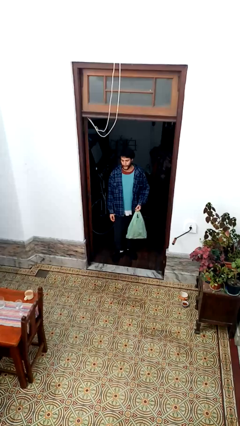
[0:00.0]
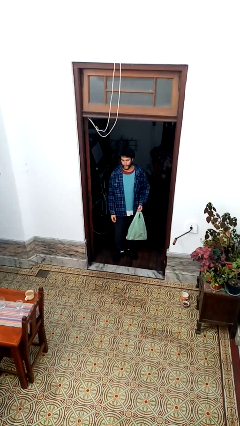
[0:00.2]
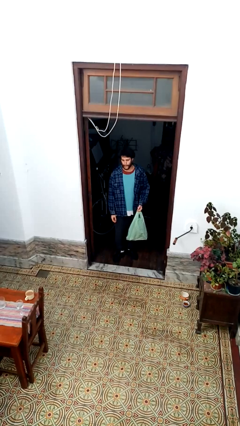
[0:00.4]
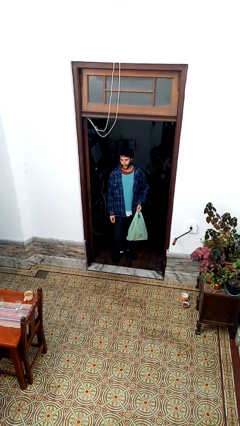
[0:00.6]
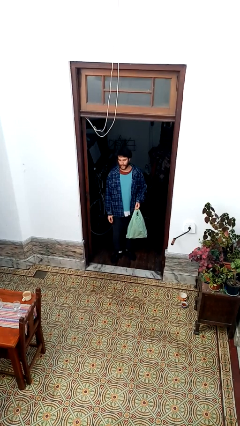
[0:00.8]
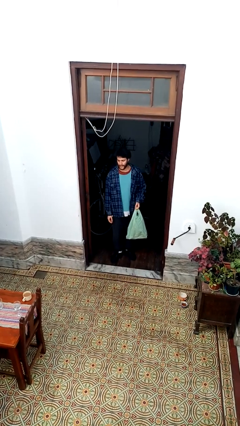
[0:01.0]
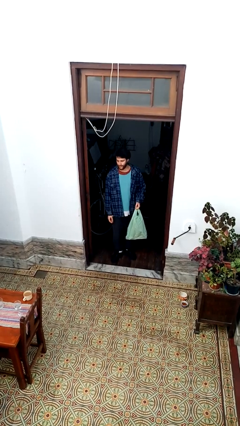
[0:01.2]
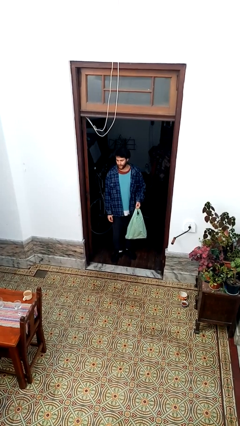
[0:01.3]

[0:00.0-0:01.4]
person carries groceries

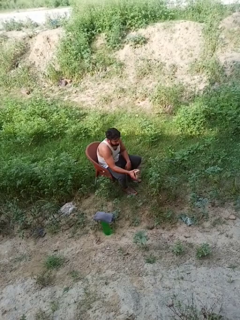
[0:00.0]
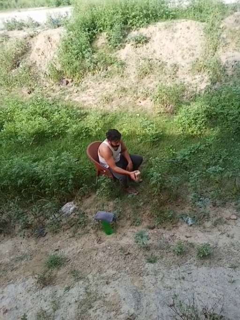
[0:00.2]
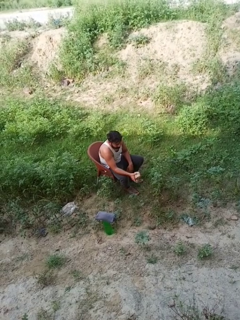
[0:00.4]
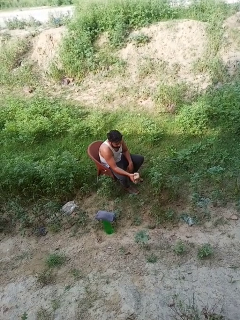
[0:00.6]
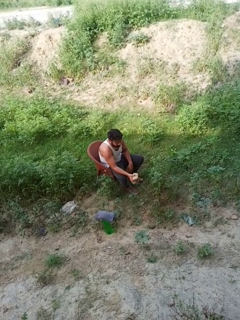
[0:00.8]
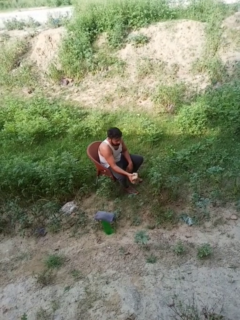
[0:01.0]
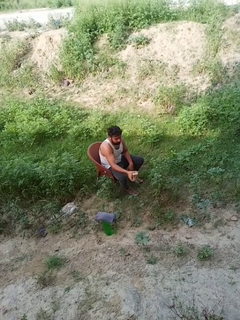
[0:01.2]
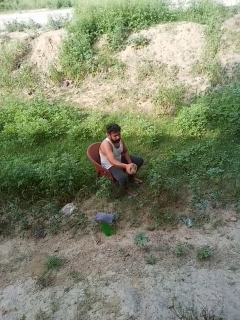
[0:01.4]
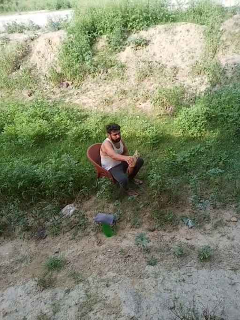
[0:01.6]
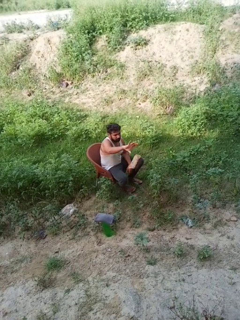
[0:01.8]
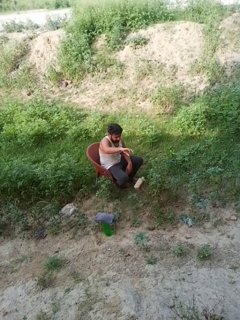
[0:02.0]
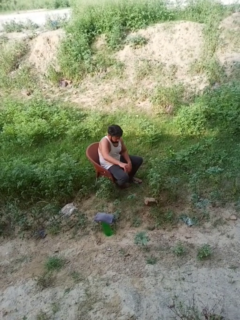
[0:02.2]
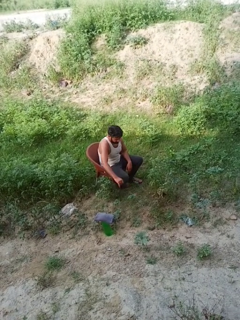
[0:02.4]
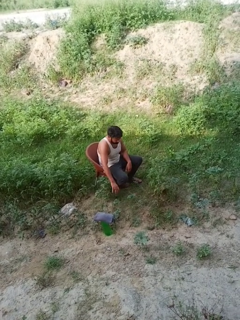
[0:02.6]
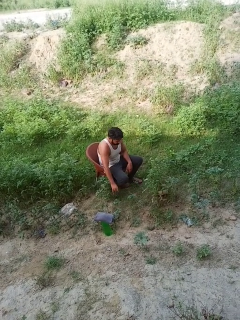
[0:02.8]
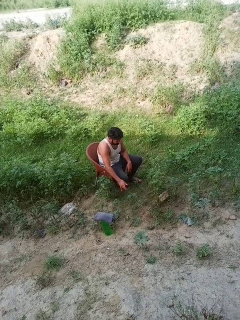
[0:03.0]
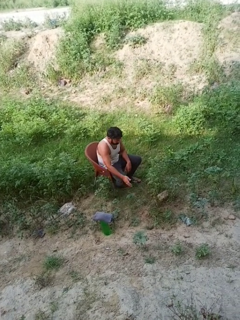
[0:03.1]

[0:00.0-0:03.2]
person throws object to ground

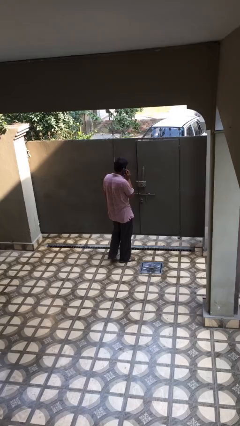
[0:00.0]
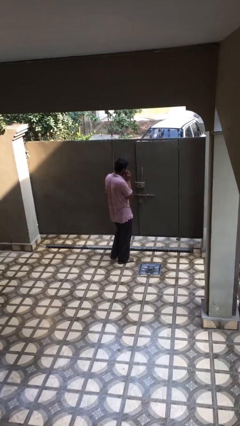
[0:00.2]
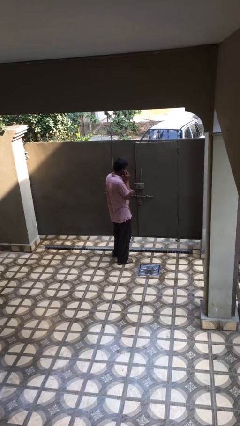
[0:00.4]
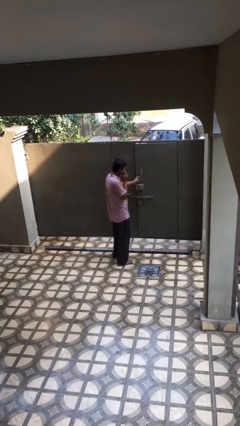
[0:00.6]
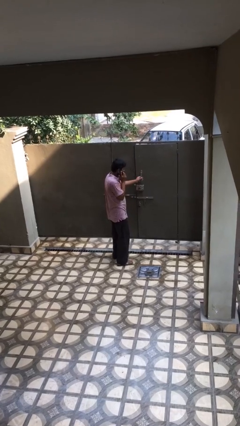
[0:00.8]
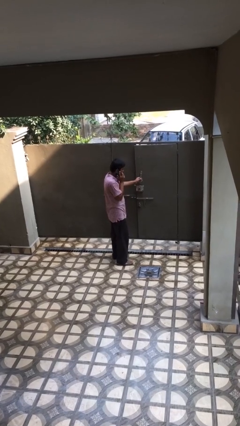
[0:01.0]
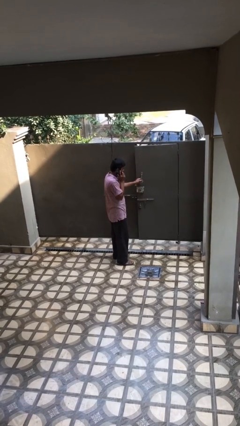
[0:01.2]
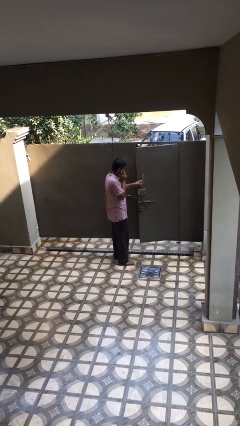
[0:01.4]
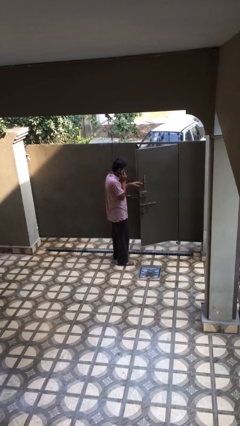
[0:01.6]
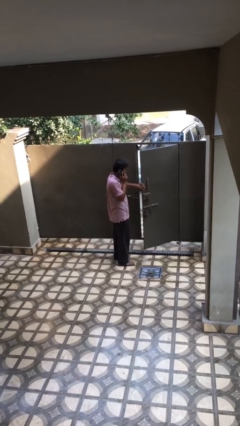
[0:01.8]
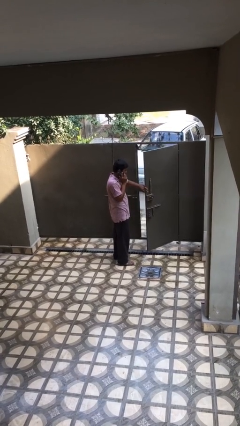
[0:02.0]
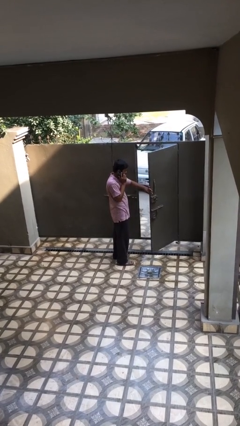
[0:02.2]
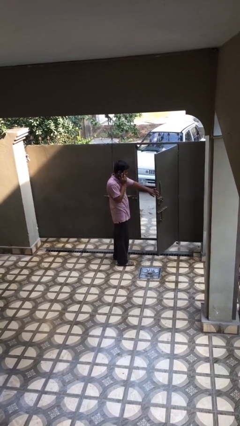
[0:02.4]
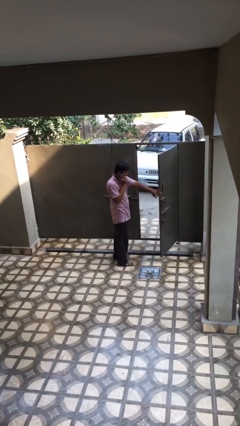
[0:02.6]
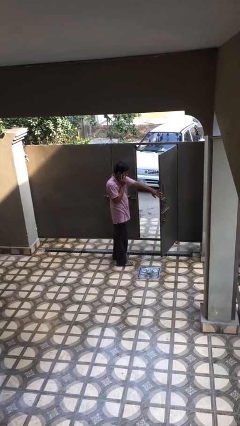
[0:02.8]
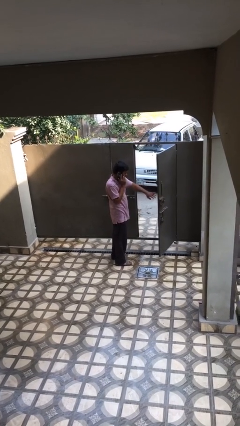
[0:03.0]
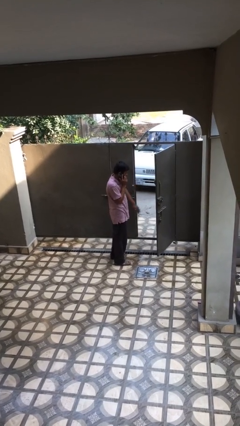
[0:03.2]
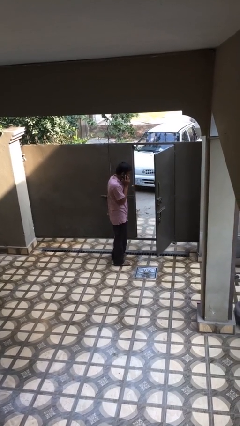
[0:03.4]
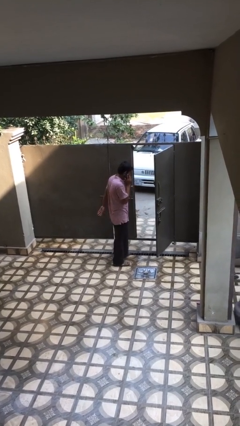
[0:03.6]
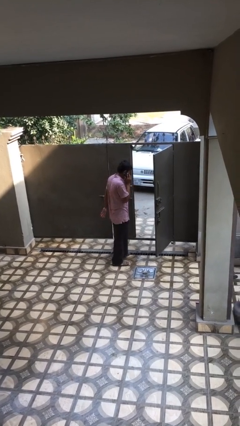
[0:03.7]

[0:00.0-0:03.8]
person opens facility door

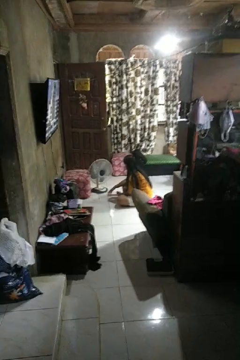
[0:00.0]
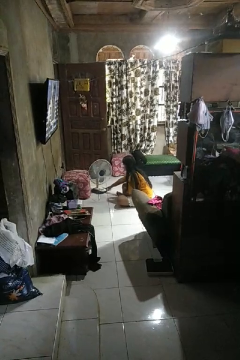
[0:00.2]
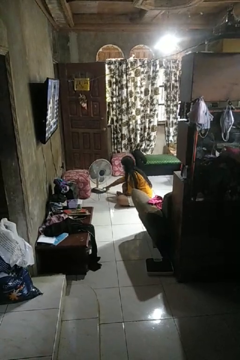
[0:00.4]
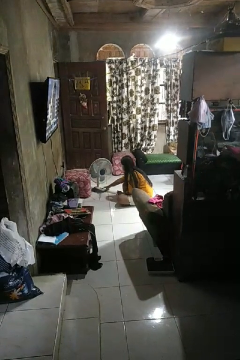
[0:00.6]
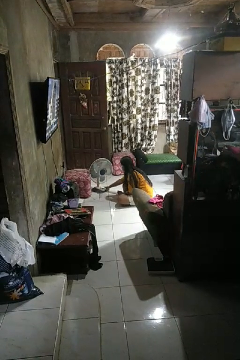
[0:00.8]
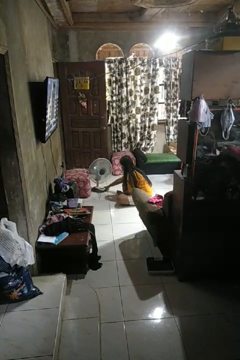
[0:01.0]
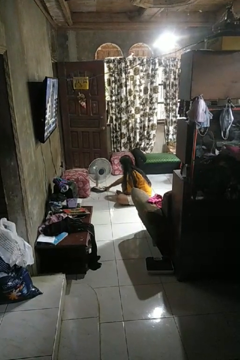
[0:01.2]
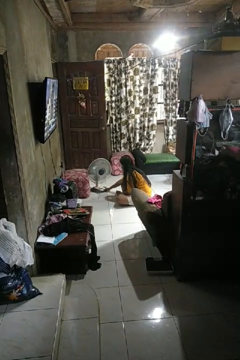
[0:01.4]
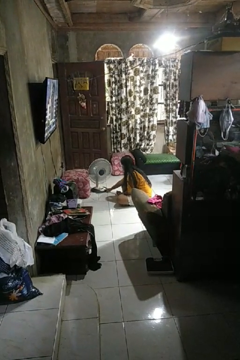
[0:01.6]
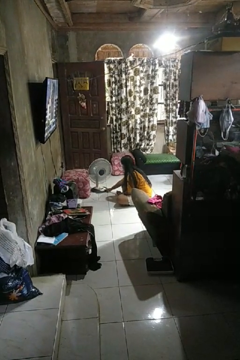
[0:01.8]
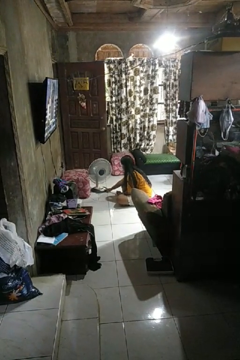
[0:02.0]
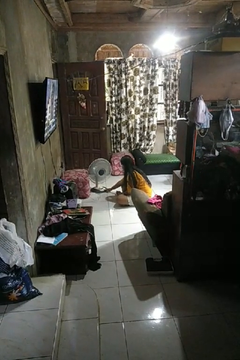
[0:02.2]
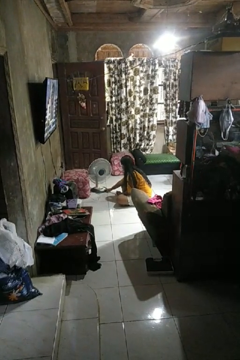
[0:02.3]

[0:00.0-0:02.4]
person turns on fan

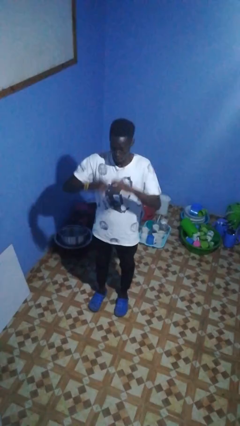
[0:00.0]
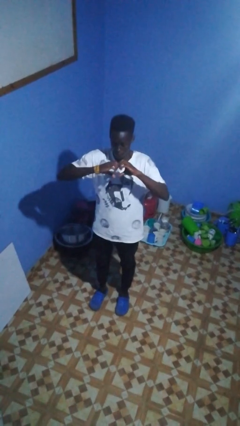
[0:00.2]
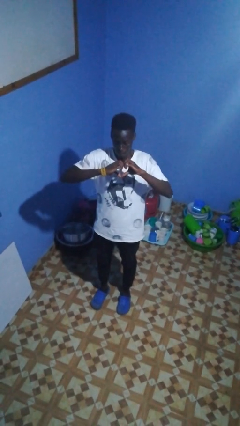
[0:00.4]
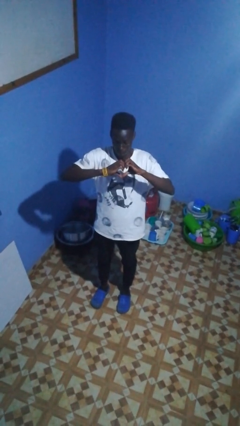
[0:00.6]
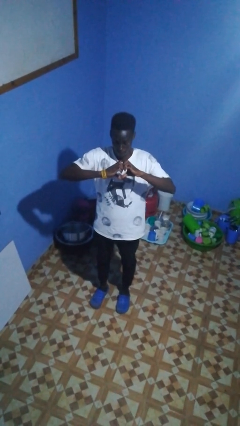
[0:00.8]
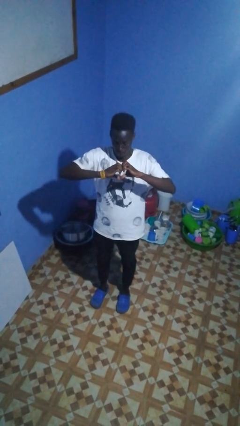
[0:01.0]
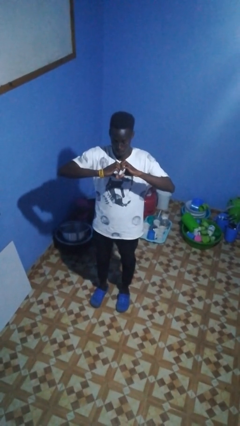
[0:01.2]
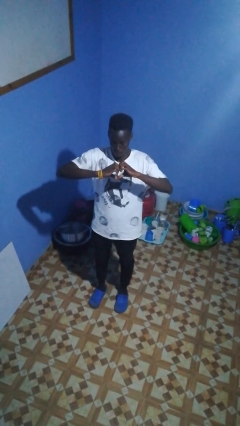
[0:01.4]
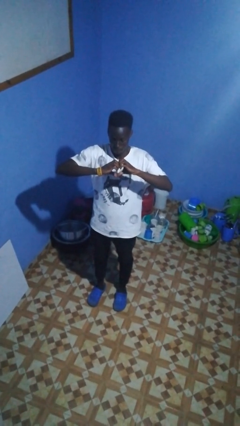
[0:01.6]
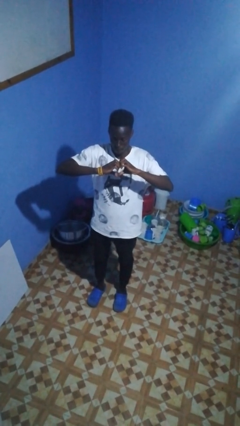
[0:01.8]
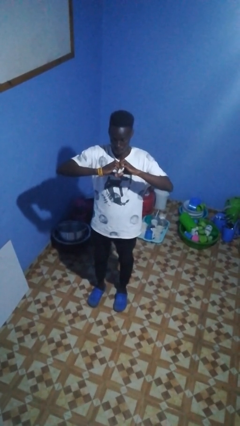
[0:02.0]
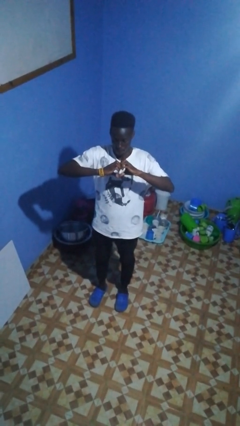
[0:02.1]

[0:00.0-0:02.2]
person gestures heart

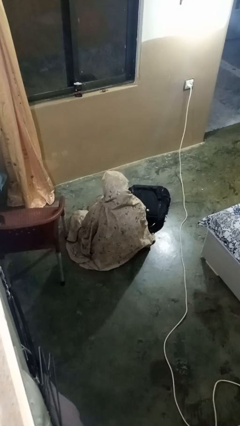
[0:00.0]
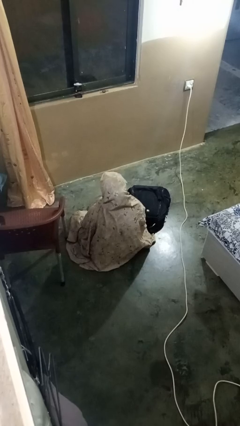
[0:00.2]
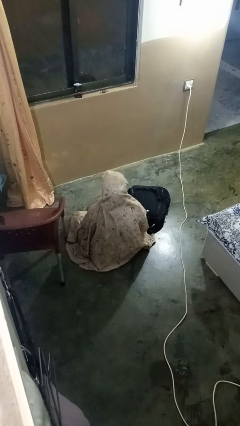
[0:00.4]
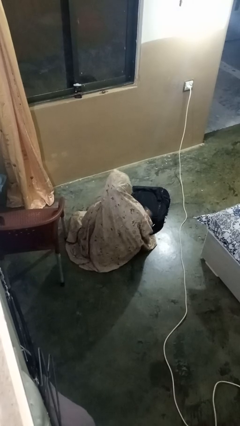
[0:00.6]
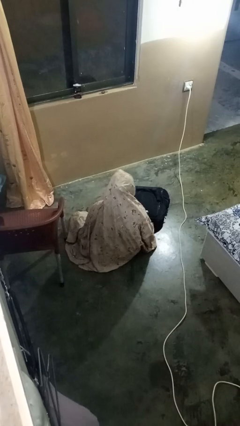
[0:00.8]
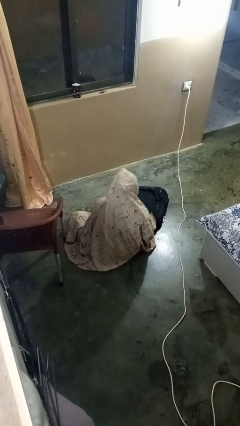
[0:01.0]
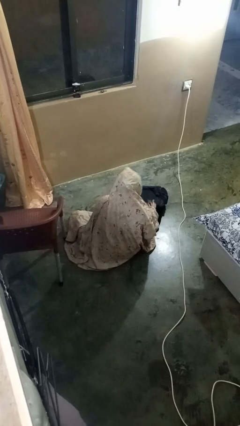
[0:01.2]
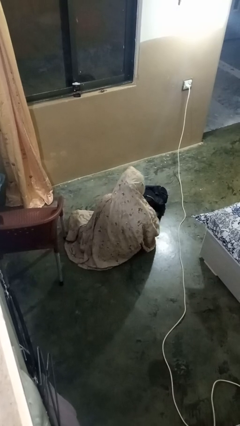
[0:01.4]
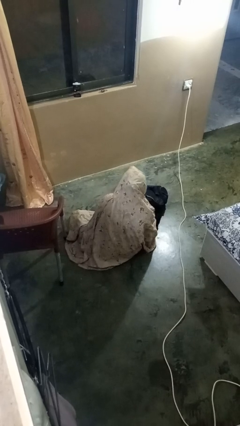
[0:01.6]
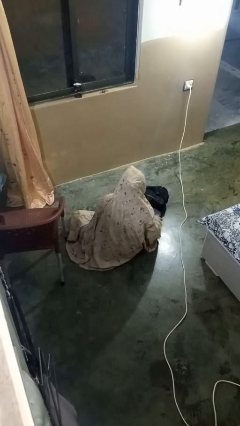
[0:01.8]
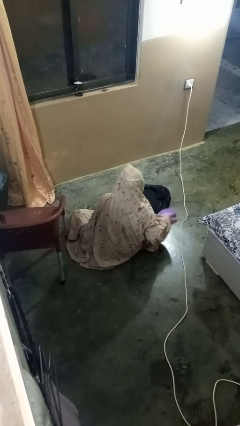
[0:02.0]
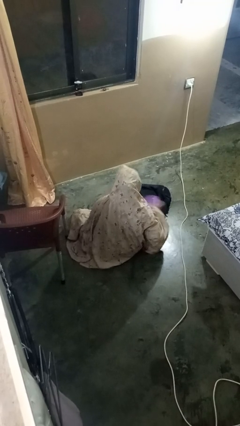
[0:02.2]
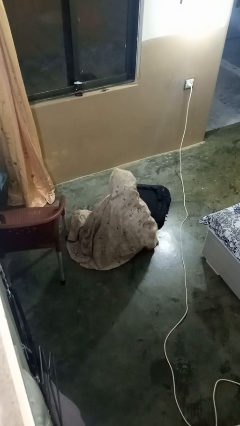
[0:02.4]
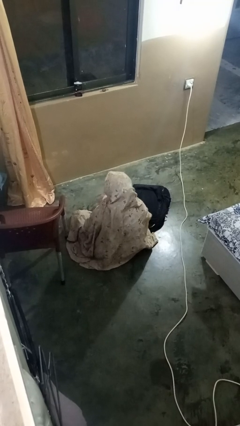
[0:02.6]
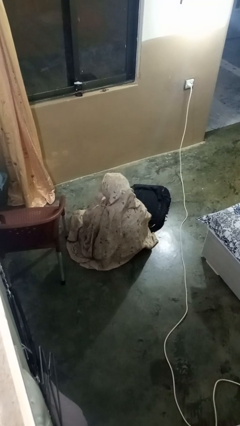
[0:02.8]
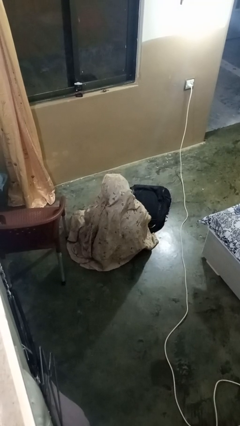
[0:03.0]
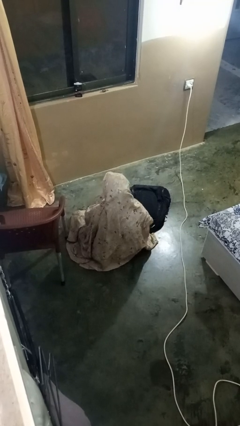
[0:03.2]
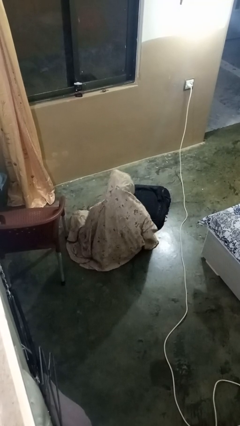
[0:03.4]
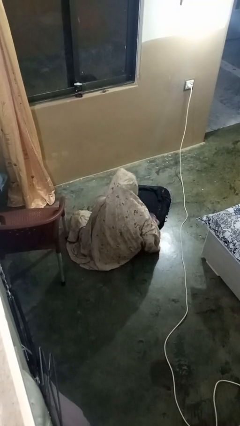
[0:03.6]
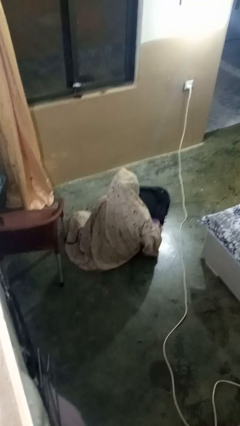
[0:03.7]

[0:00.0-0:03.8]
person eats snack from bag

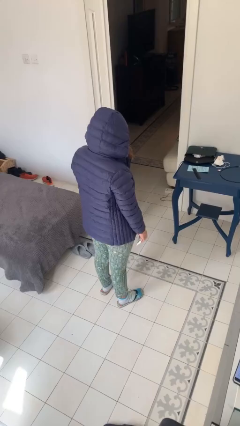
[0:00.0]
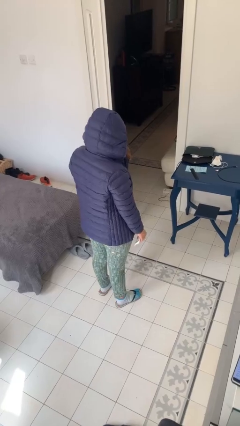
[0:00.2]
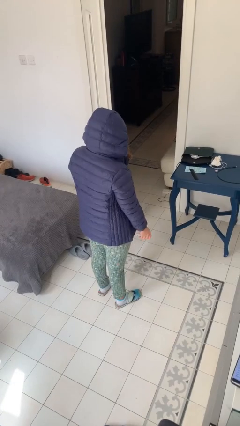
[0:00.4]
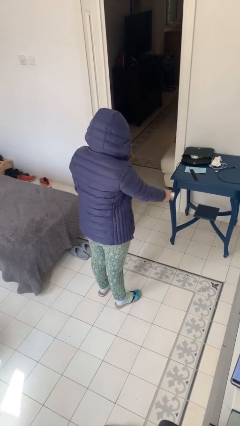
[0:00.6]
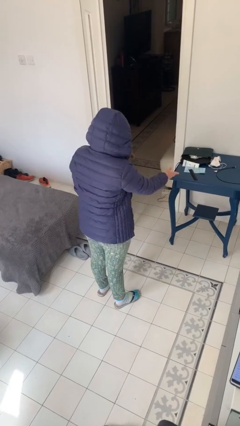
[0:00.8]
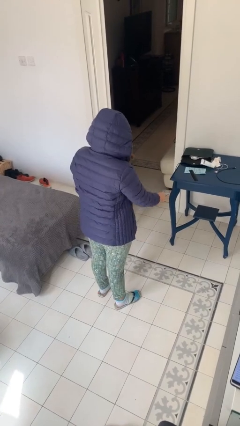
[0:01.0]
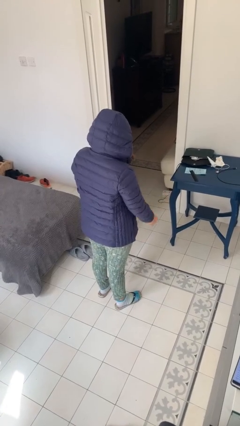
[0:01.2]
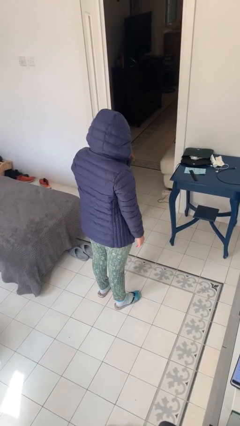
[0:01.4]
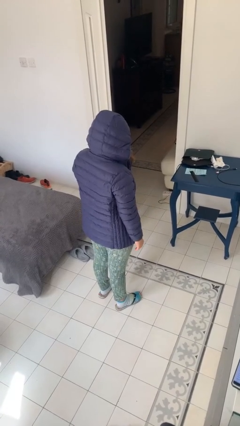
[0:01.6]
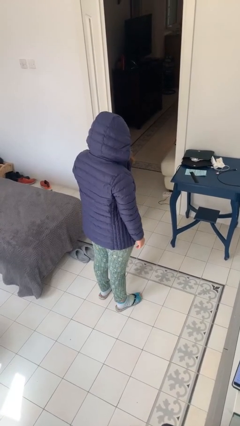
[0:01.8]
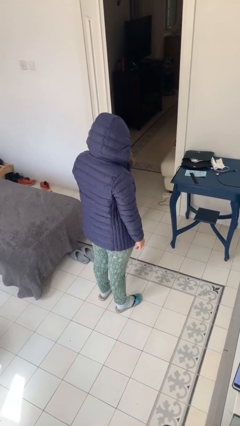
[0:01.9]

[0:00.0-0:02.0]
person throws object on table
